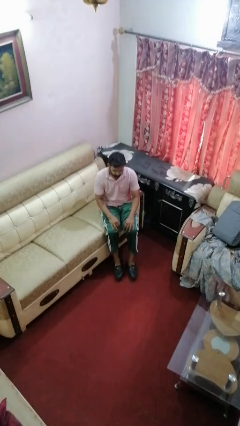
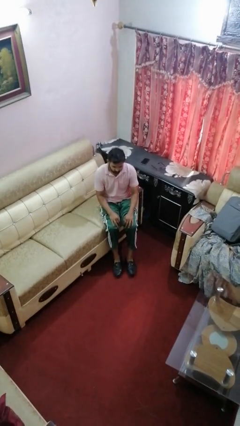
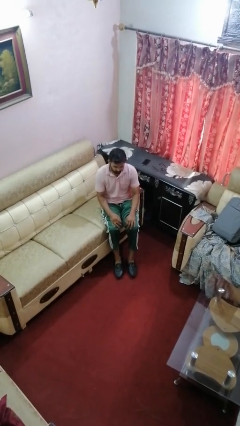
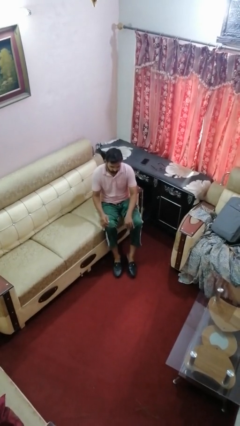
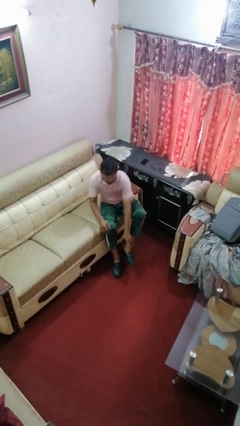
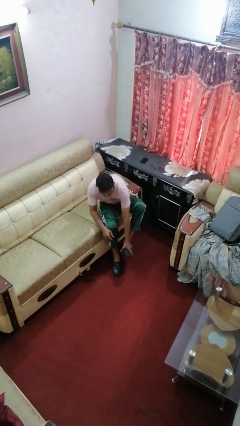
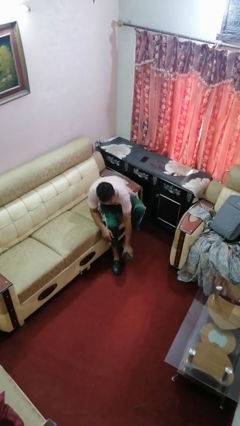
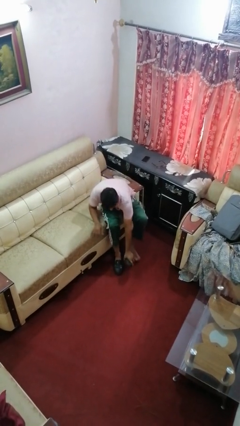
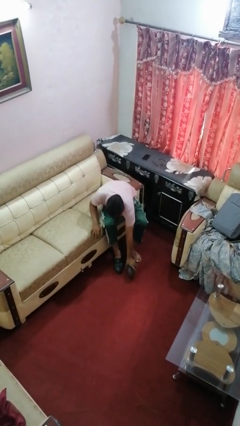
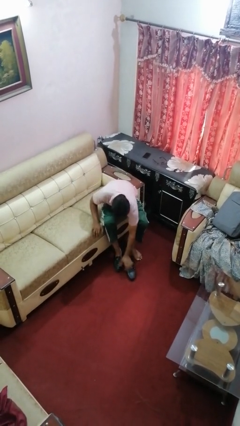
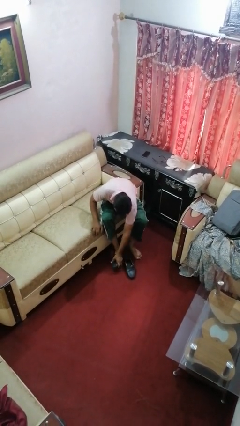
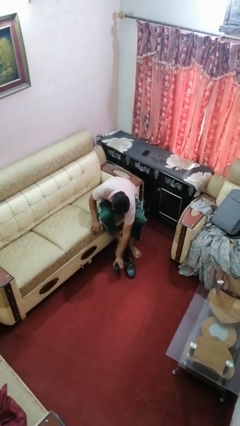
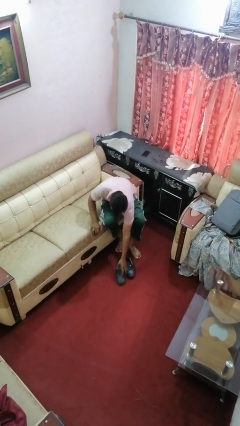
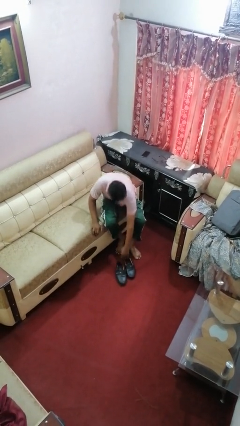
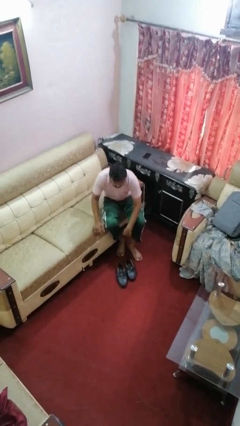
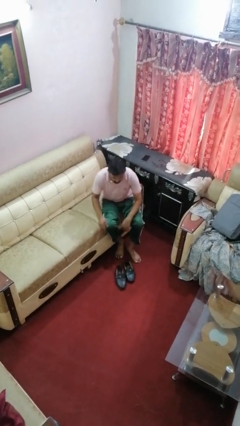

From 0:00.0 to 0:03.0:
person takes off shoes

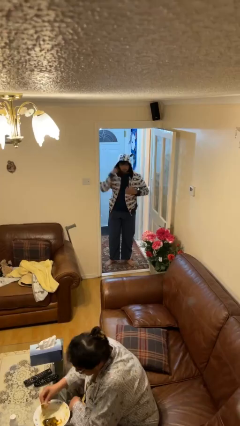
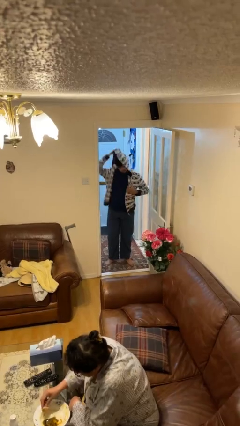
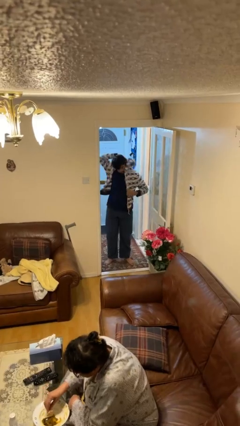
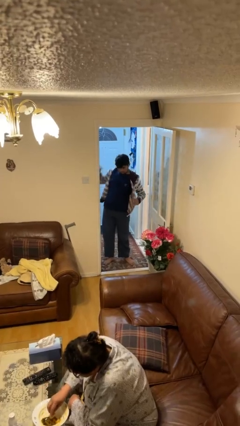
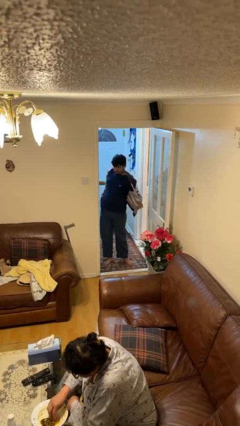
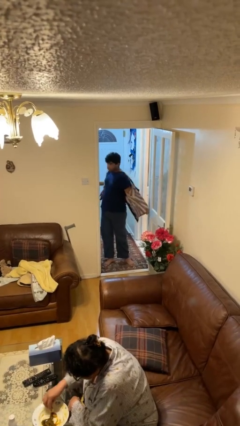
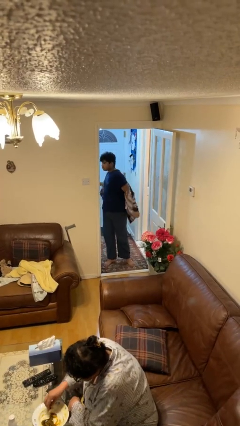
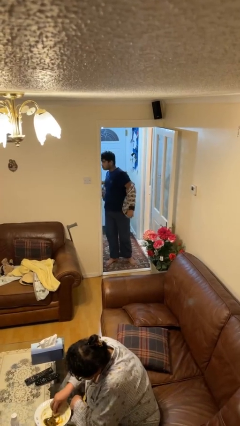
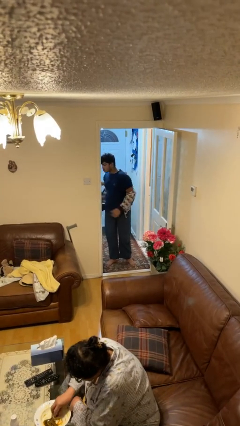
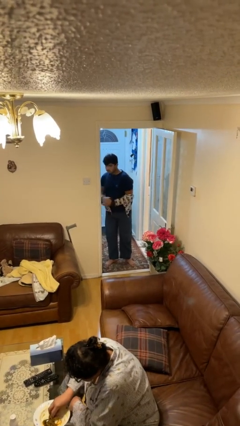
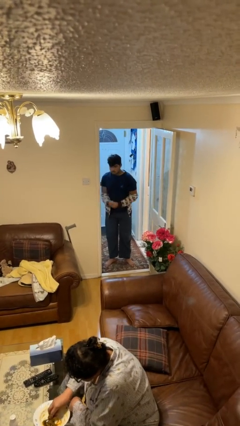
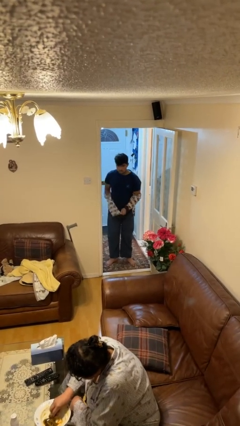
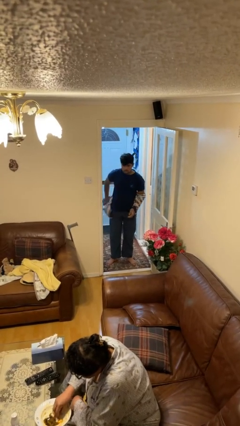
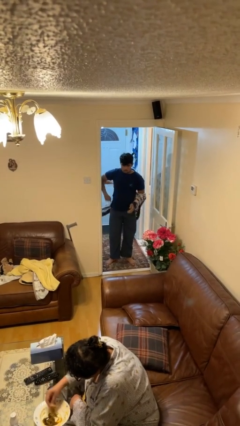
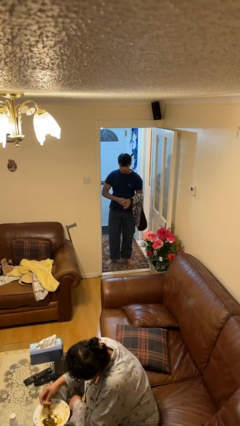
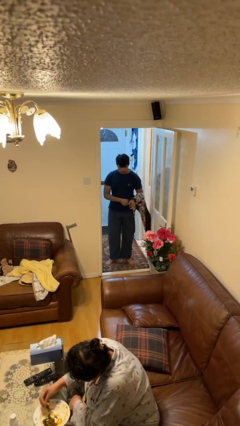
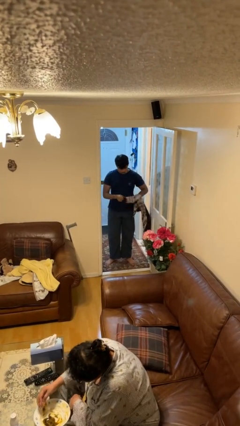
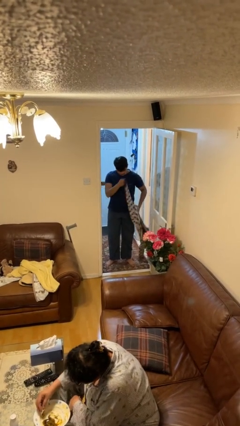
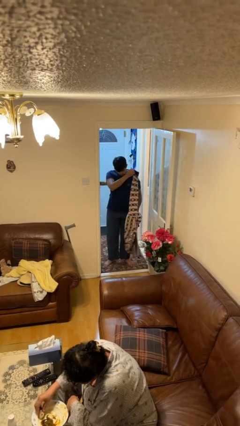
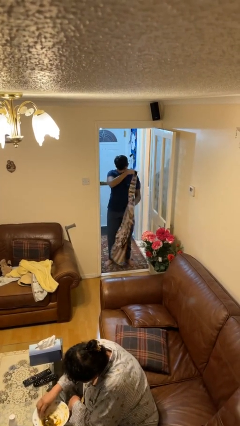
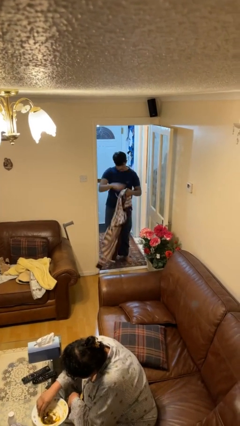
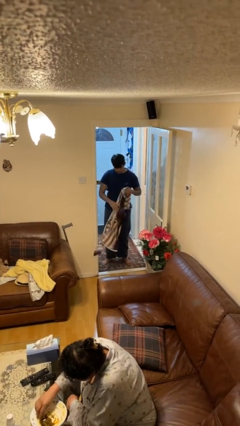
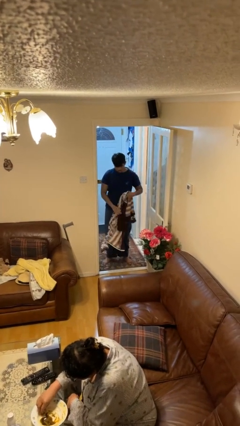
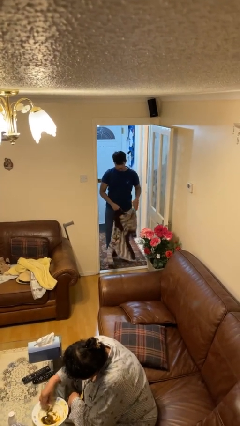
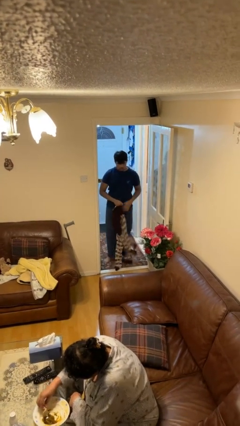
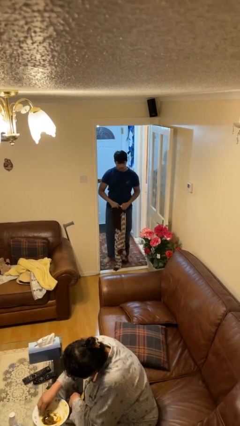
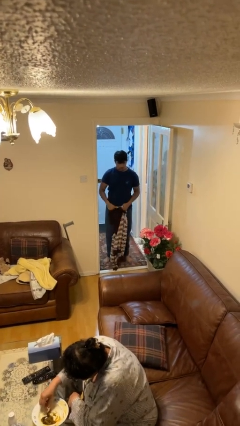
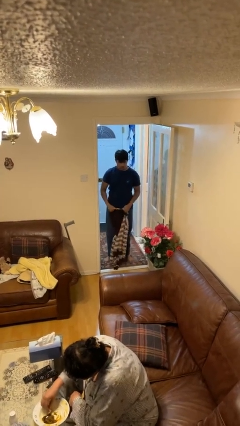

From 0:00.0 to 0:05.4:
person takes off hoodie

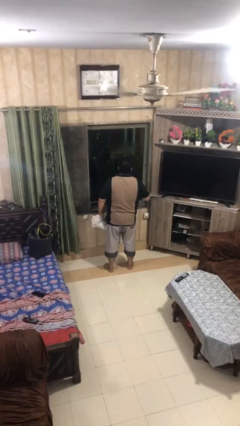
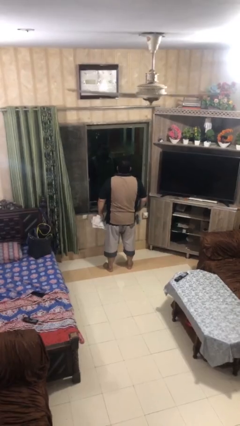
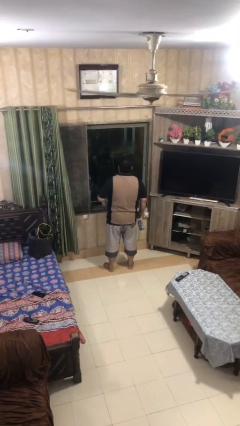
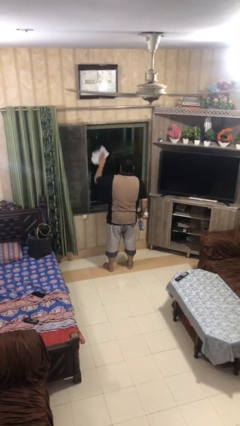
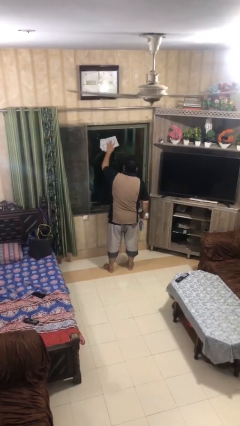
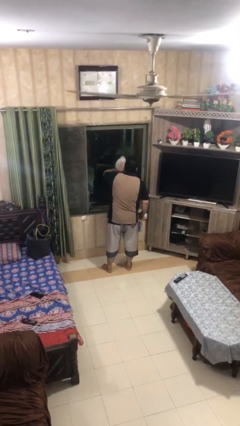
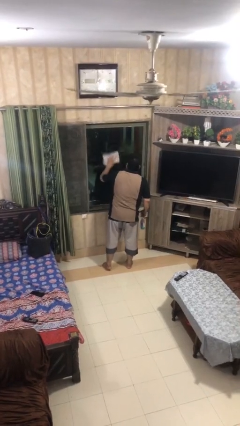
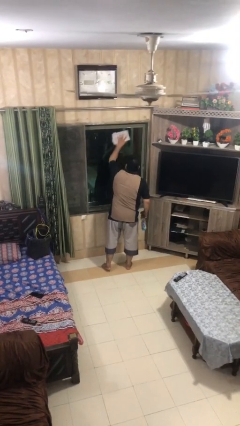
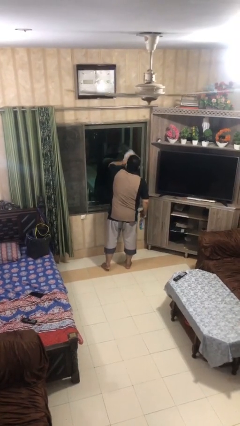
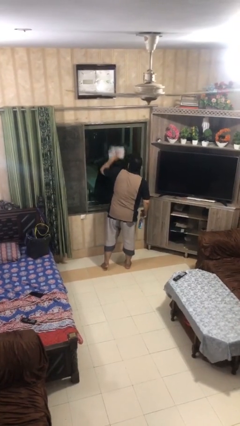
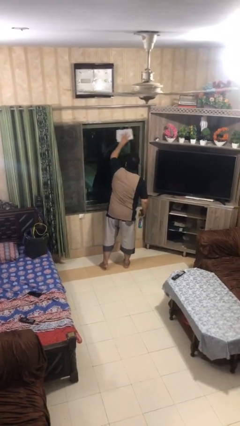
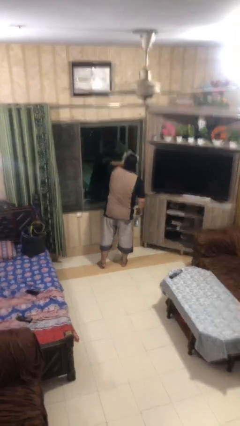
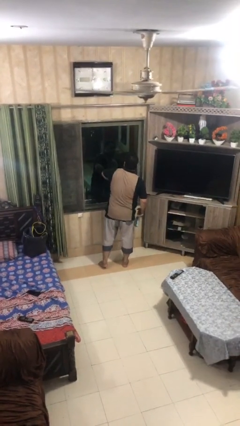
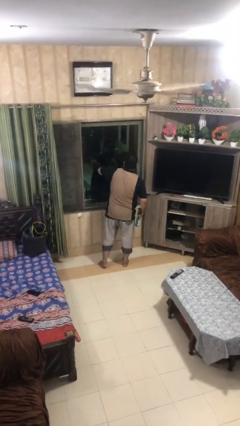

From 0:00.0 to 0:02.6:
person washes window

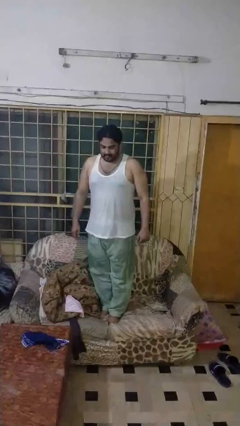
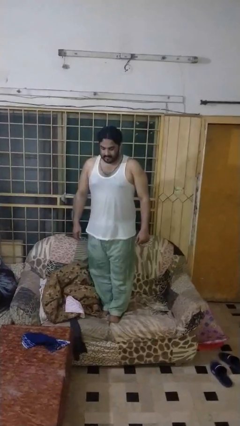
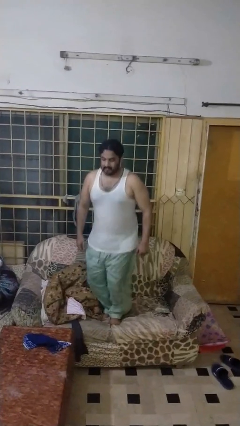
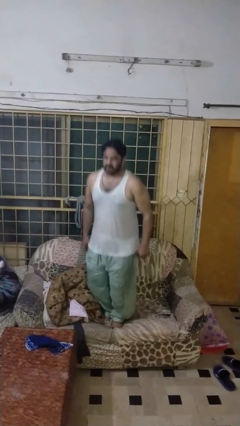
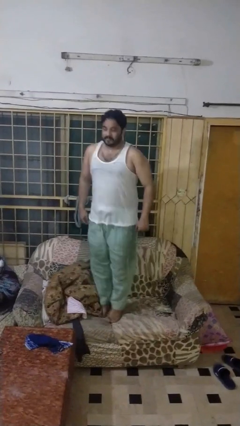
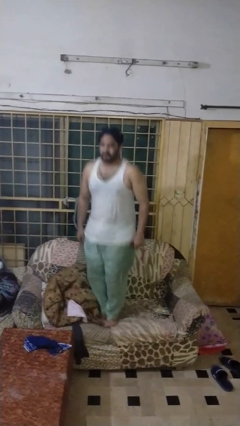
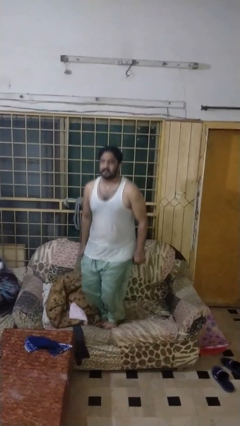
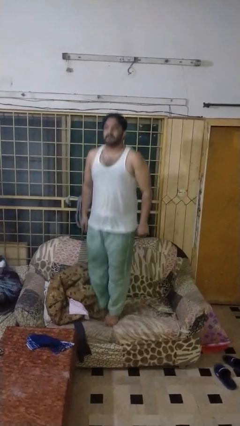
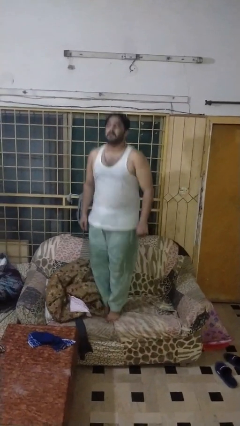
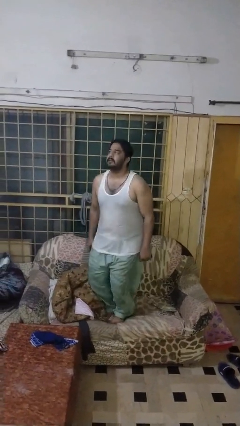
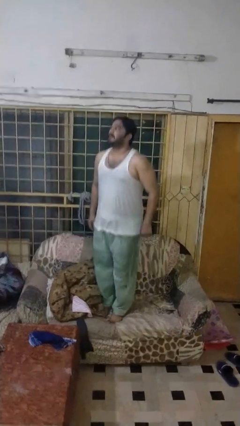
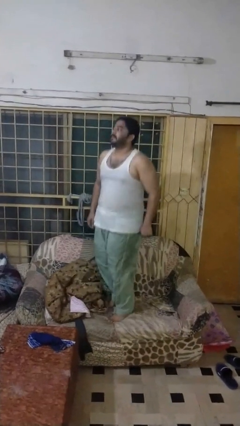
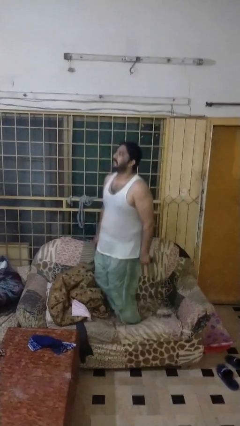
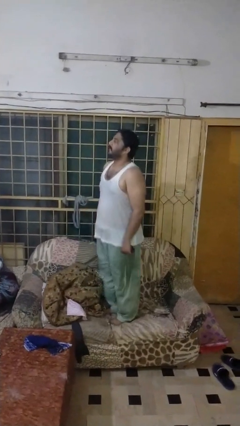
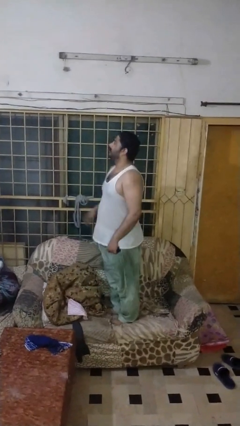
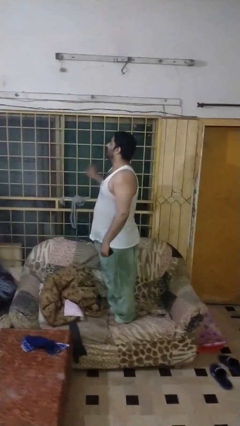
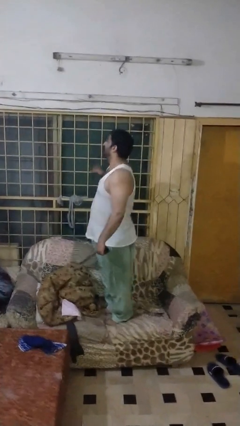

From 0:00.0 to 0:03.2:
person jumps on couch

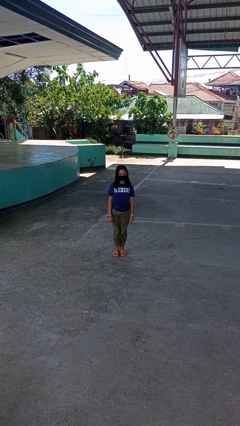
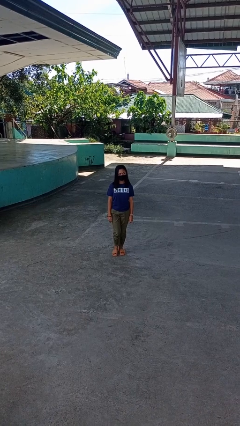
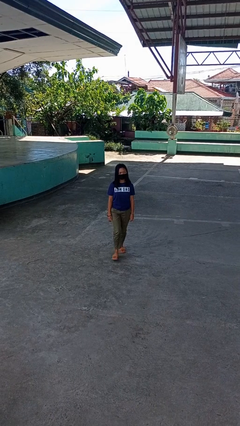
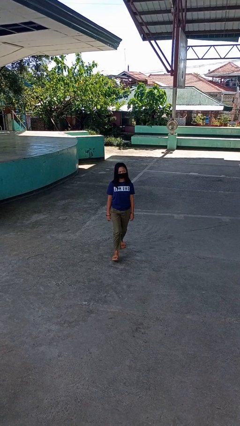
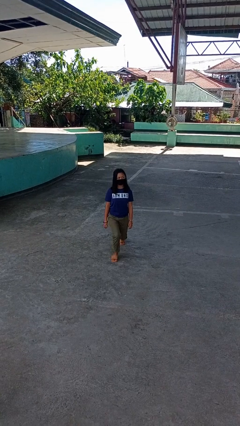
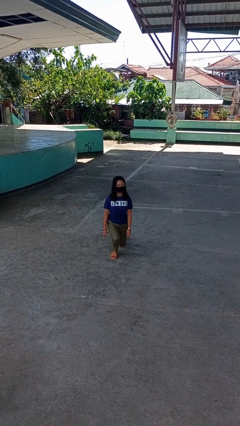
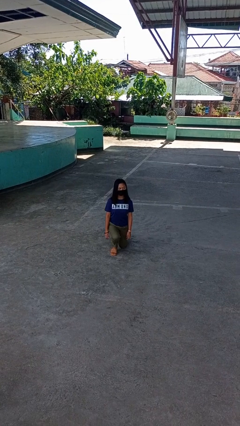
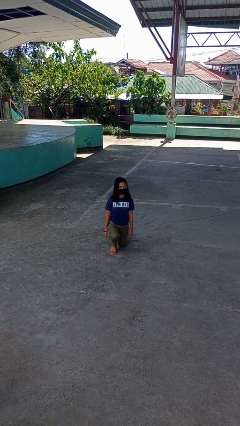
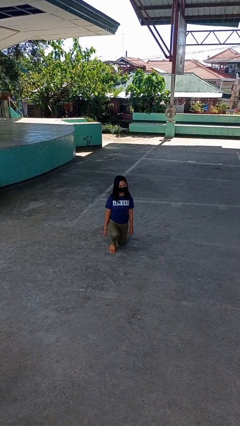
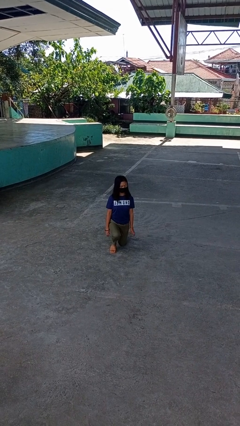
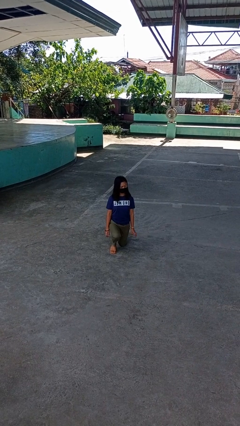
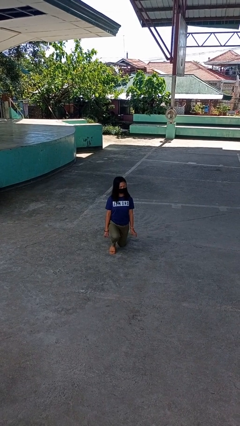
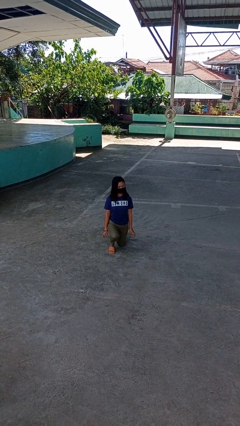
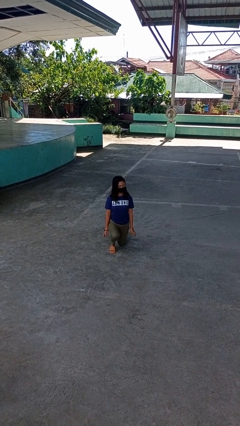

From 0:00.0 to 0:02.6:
person kneels

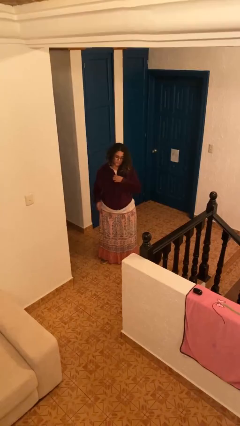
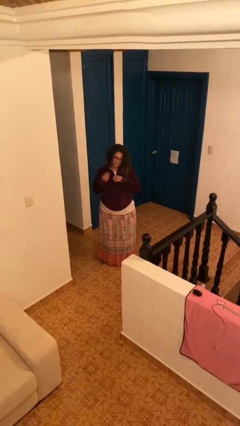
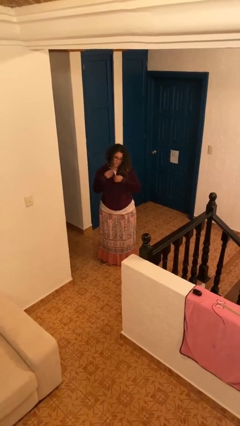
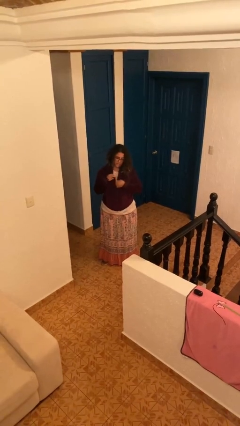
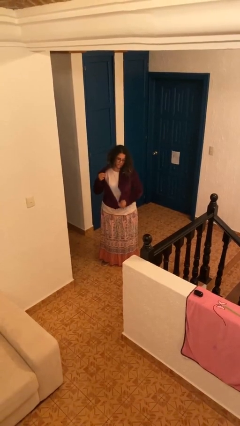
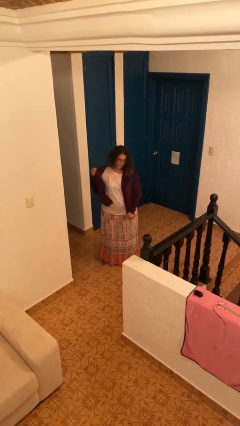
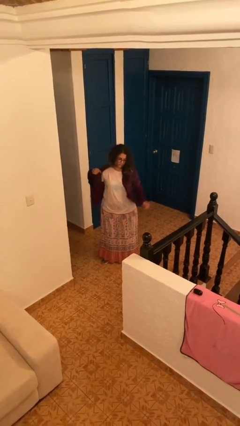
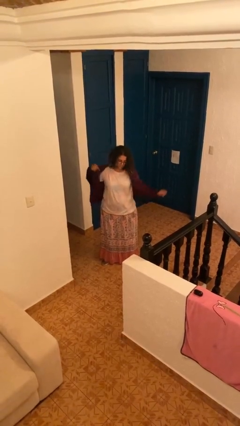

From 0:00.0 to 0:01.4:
person unzips jacket
